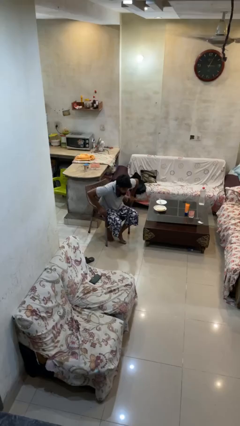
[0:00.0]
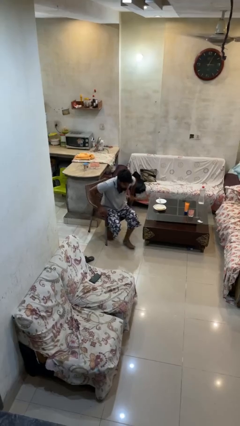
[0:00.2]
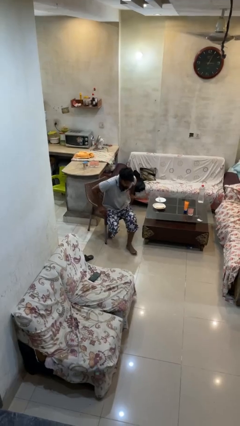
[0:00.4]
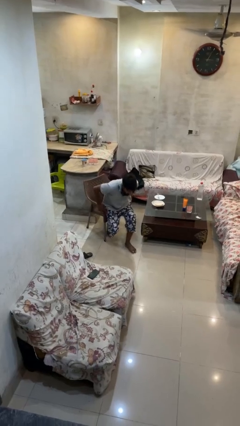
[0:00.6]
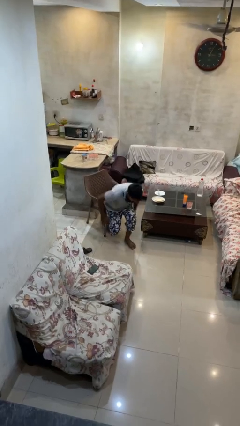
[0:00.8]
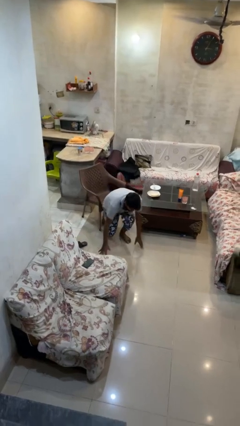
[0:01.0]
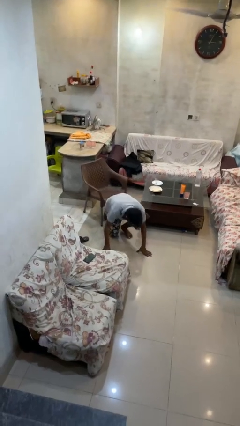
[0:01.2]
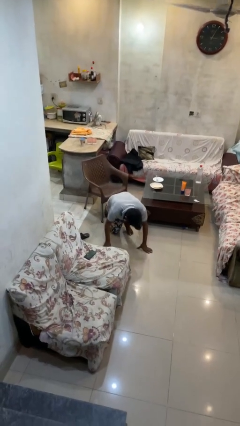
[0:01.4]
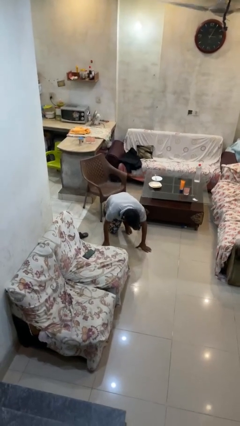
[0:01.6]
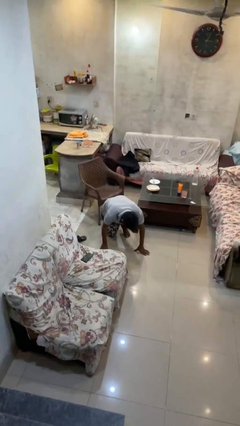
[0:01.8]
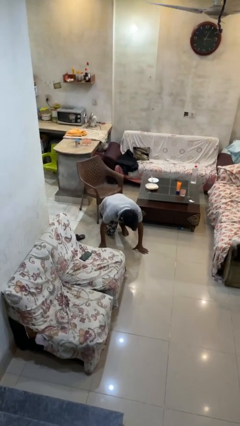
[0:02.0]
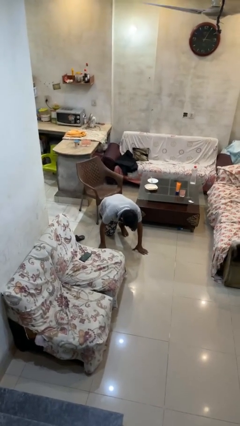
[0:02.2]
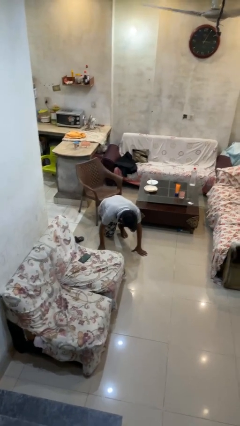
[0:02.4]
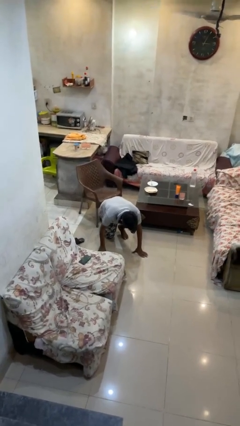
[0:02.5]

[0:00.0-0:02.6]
person falls from chair

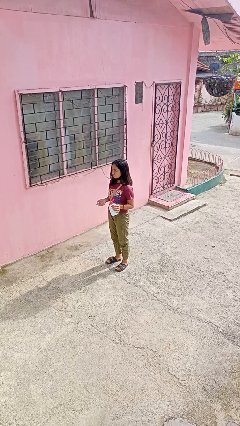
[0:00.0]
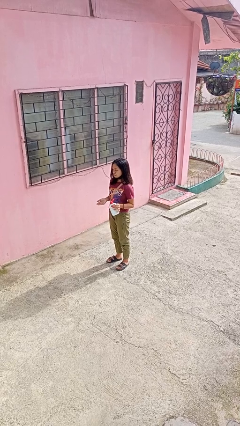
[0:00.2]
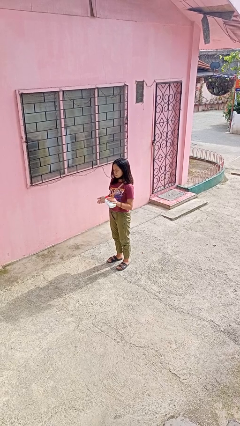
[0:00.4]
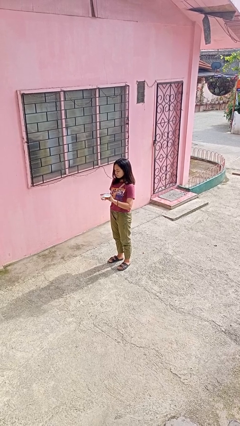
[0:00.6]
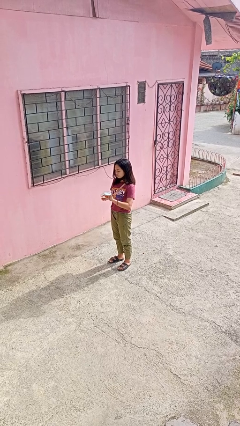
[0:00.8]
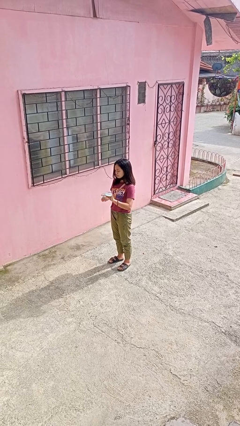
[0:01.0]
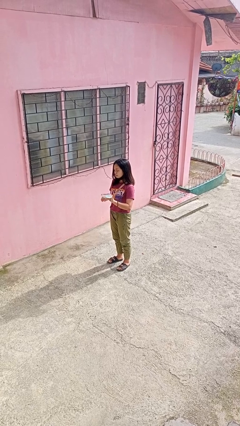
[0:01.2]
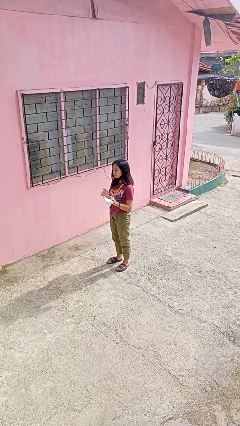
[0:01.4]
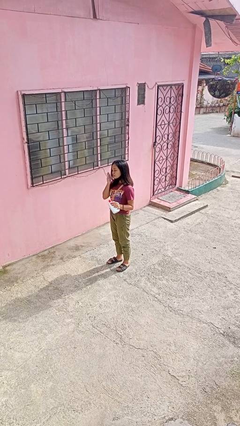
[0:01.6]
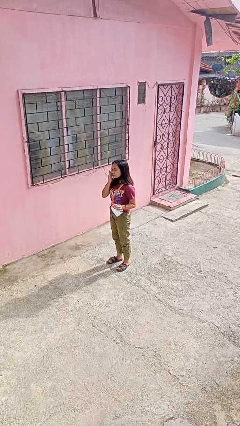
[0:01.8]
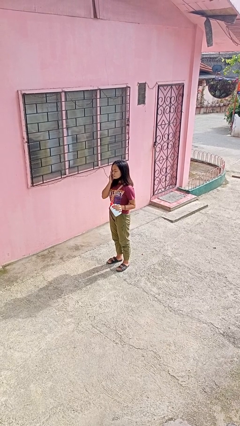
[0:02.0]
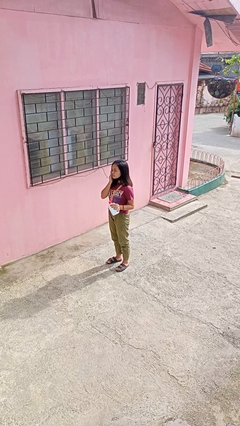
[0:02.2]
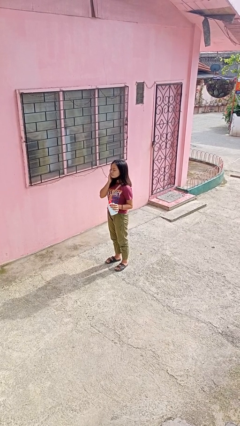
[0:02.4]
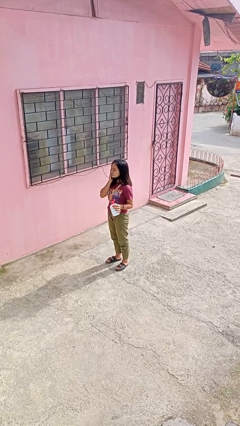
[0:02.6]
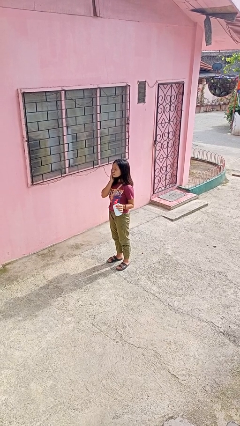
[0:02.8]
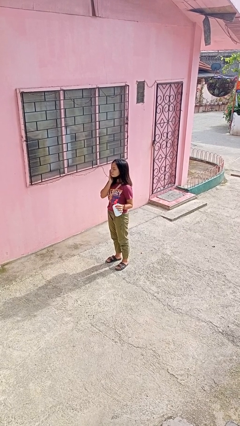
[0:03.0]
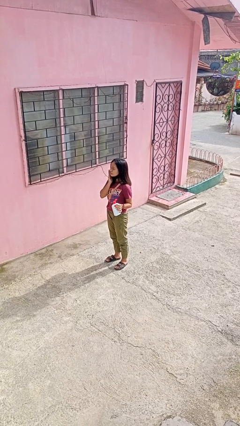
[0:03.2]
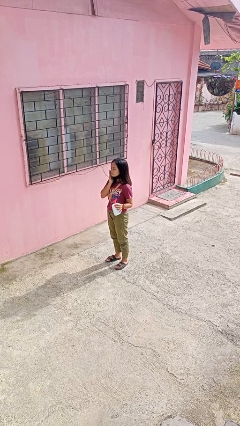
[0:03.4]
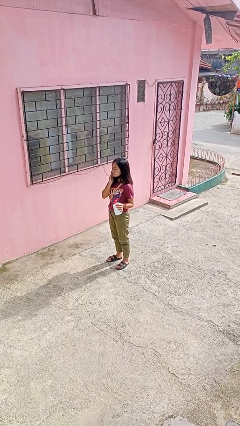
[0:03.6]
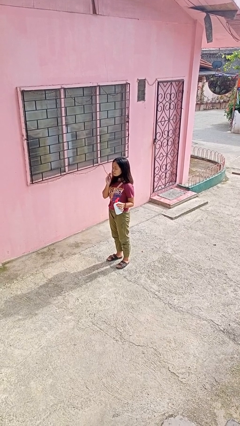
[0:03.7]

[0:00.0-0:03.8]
person applies facial moisturizer

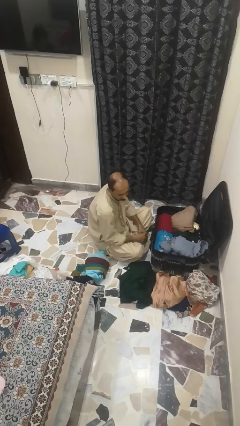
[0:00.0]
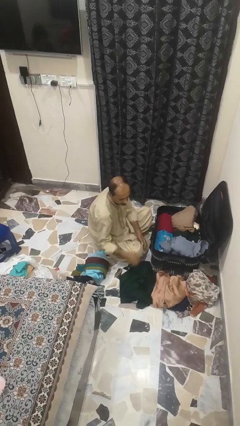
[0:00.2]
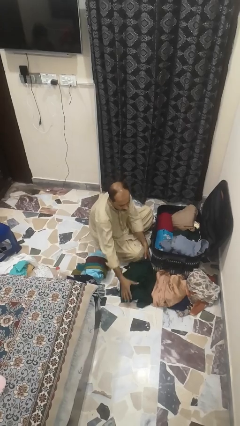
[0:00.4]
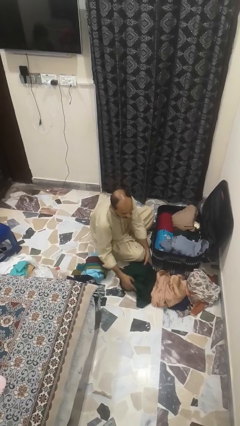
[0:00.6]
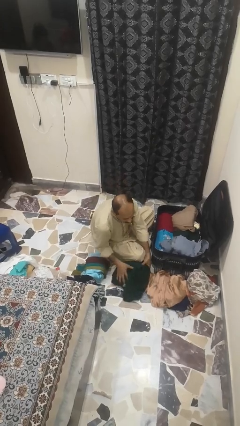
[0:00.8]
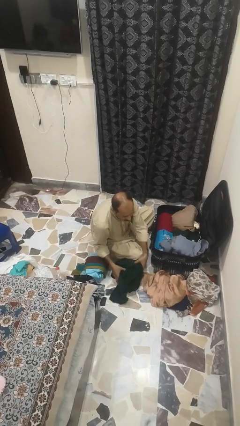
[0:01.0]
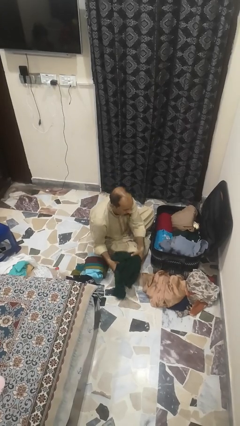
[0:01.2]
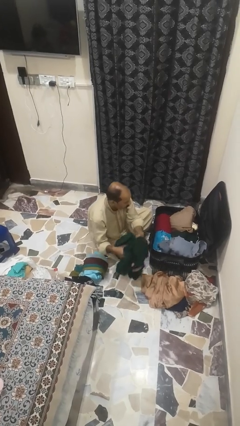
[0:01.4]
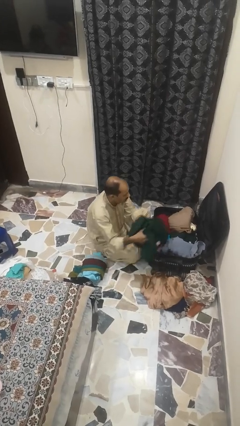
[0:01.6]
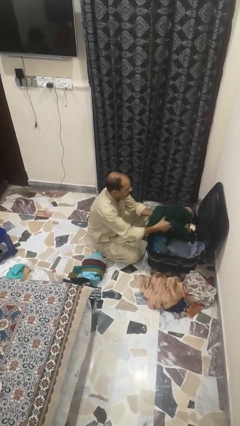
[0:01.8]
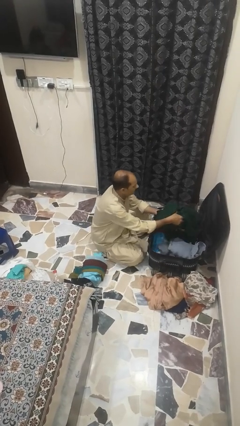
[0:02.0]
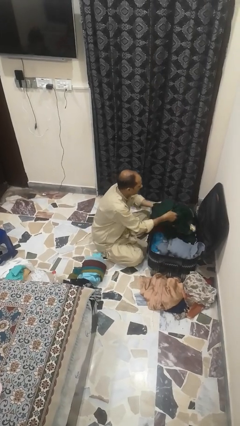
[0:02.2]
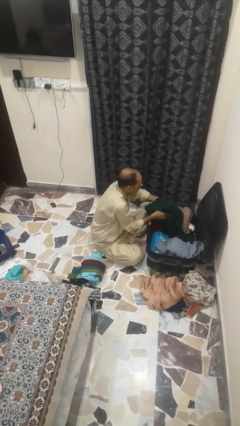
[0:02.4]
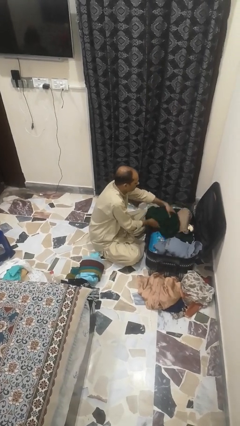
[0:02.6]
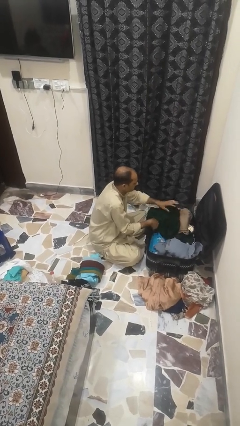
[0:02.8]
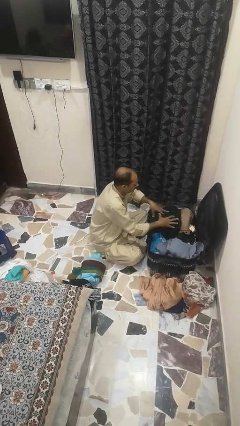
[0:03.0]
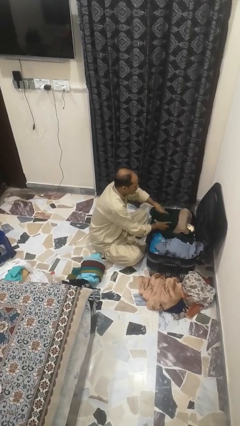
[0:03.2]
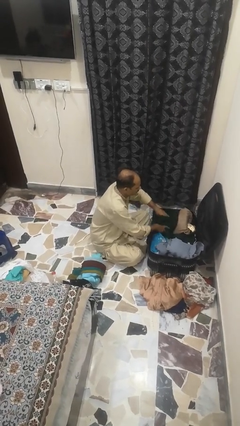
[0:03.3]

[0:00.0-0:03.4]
person loads clothes into suitcase

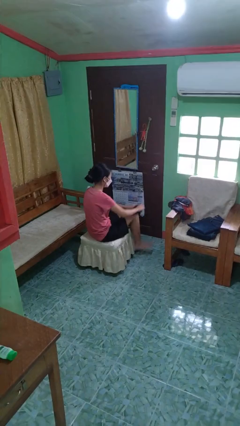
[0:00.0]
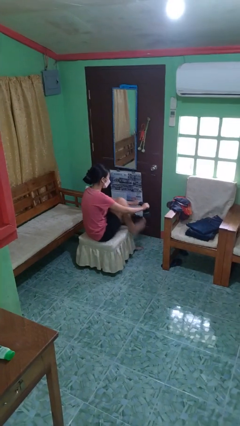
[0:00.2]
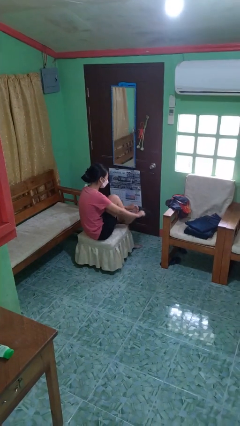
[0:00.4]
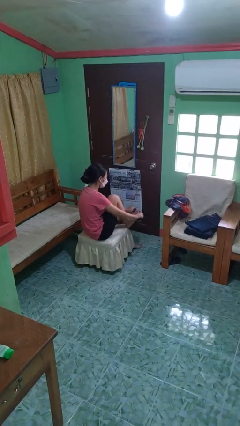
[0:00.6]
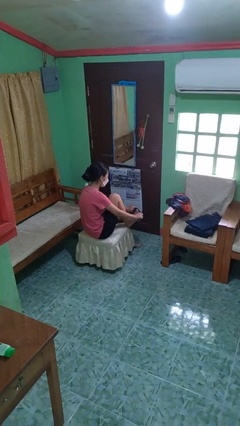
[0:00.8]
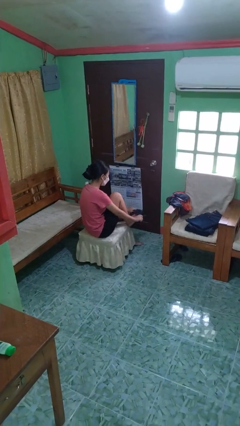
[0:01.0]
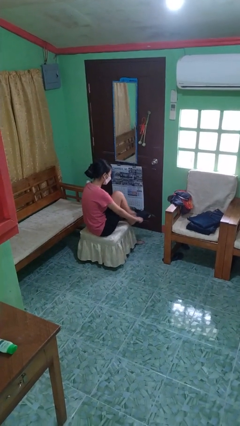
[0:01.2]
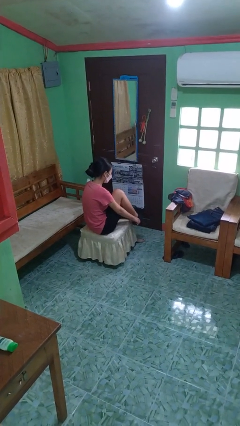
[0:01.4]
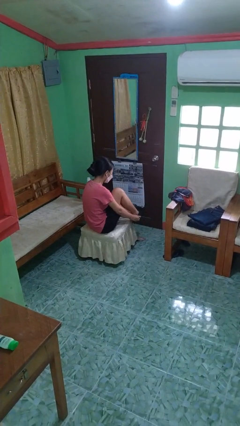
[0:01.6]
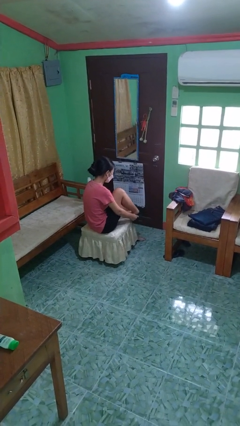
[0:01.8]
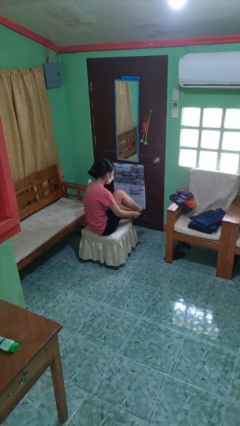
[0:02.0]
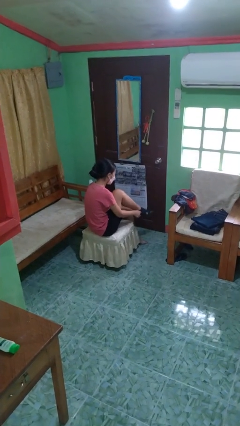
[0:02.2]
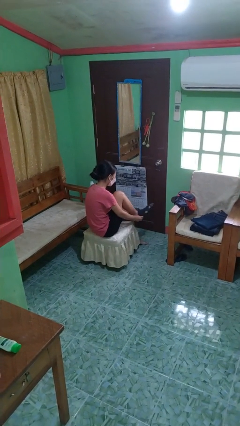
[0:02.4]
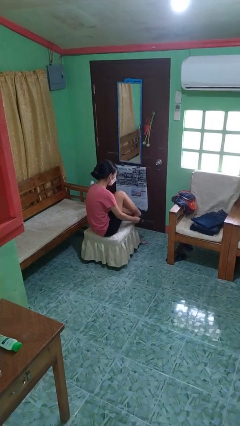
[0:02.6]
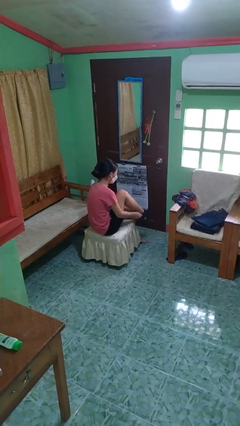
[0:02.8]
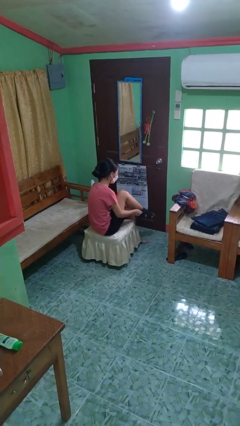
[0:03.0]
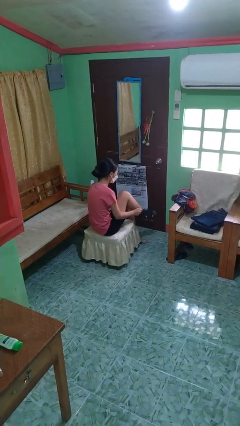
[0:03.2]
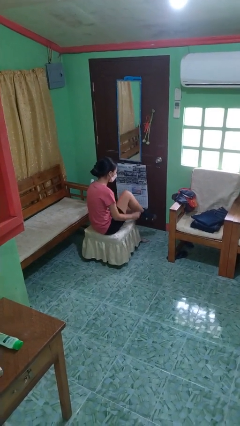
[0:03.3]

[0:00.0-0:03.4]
person puts on socks

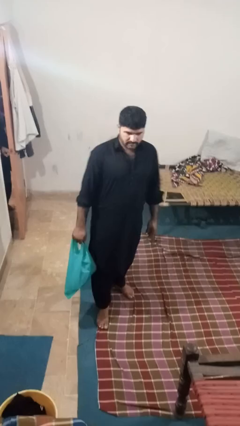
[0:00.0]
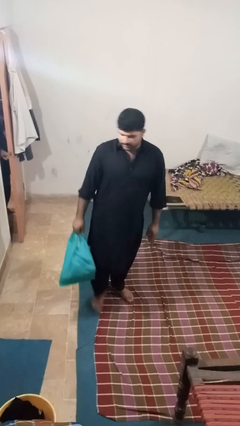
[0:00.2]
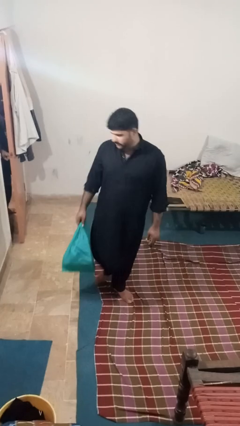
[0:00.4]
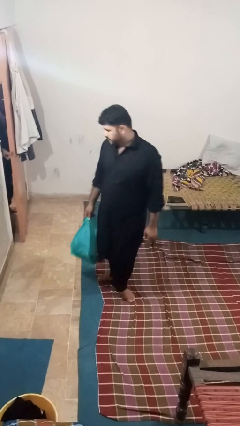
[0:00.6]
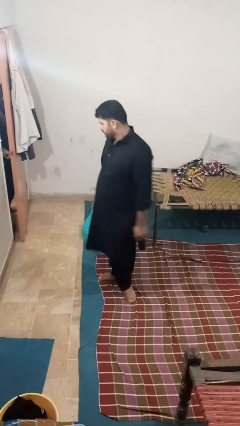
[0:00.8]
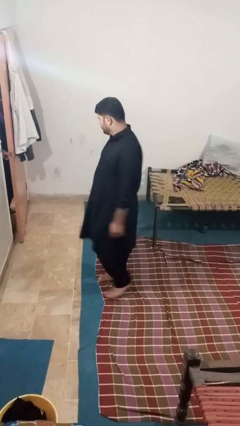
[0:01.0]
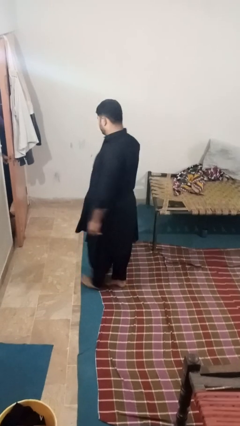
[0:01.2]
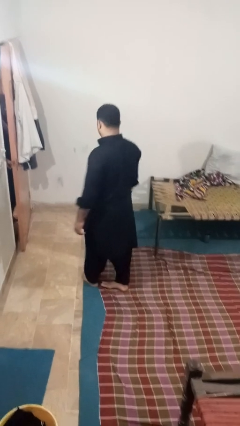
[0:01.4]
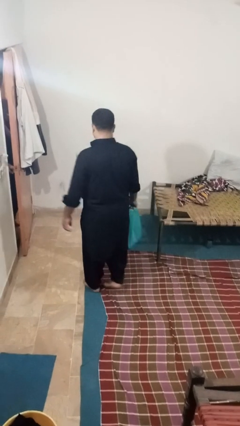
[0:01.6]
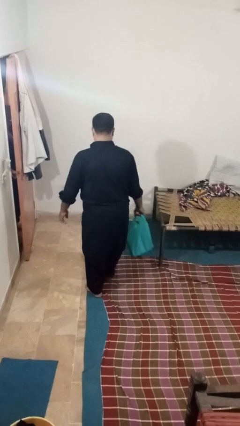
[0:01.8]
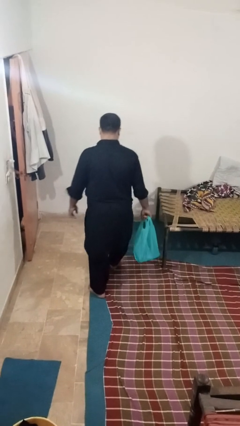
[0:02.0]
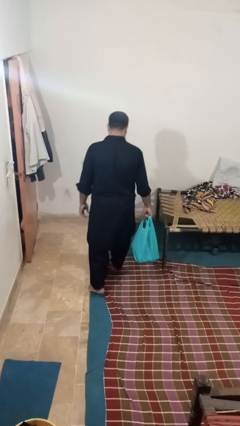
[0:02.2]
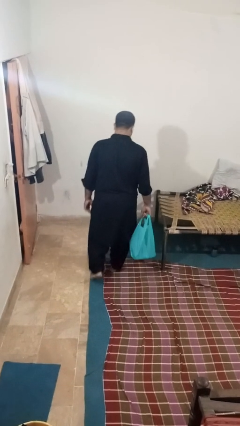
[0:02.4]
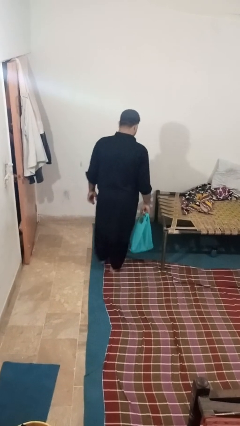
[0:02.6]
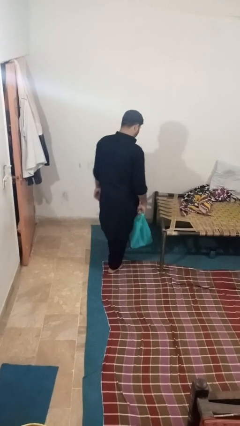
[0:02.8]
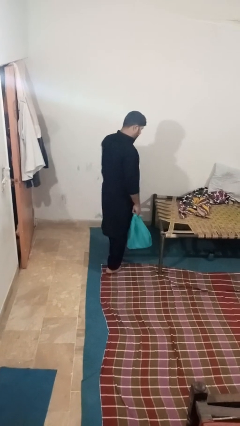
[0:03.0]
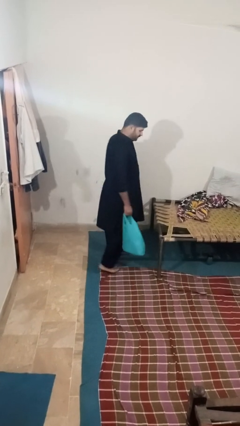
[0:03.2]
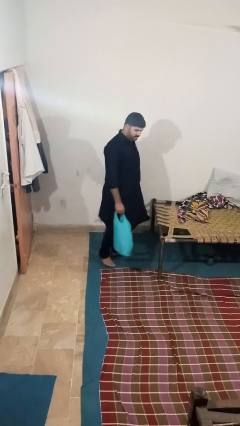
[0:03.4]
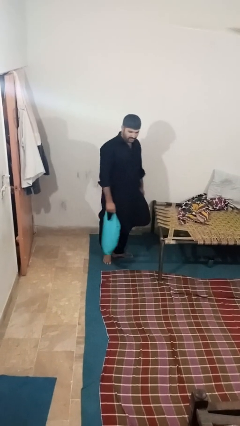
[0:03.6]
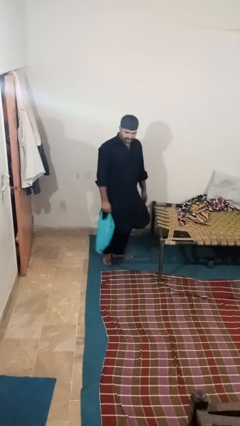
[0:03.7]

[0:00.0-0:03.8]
person carries groceries

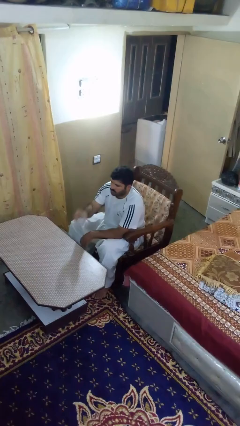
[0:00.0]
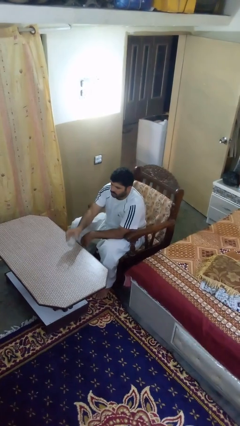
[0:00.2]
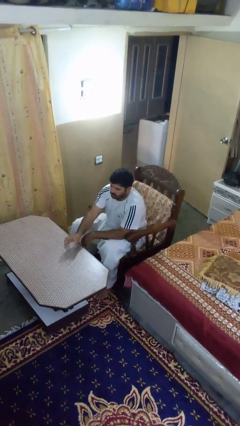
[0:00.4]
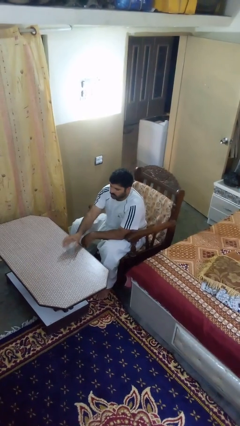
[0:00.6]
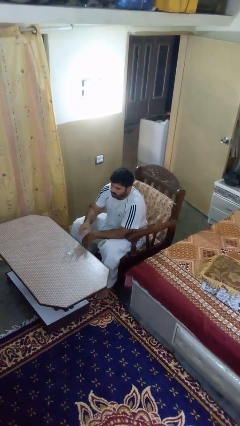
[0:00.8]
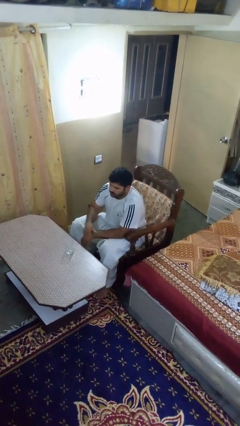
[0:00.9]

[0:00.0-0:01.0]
person puts down object on table
